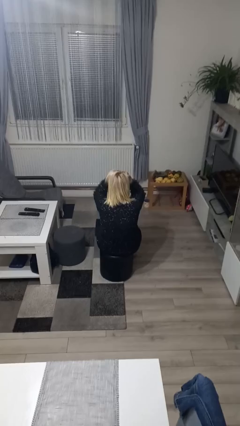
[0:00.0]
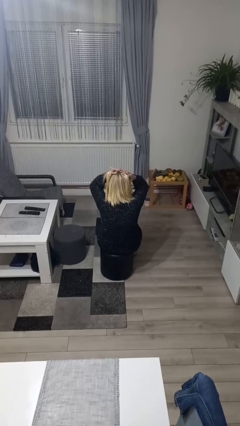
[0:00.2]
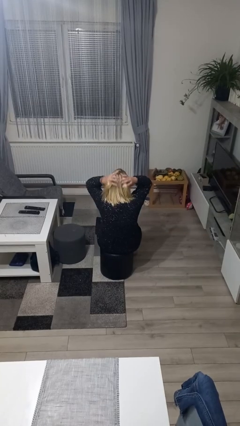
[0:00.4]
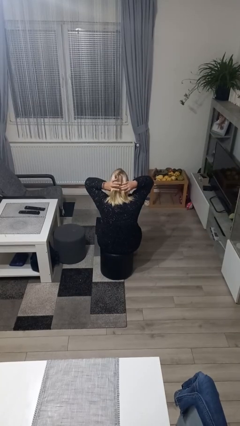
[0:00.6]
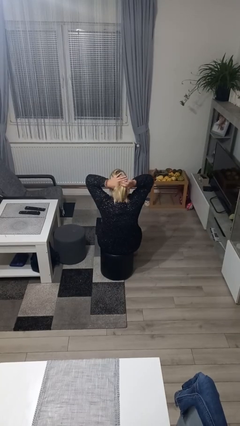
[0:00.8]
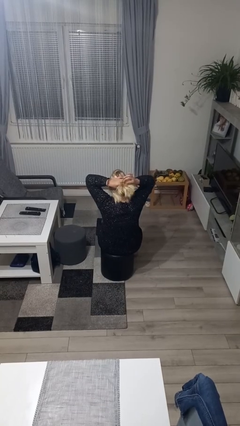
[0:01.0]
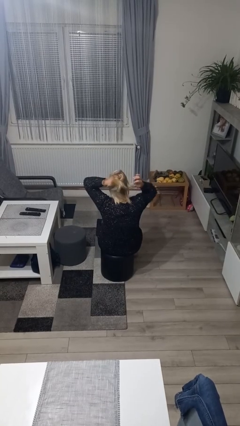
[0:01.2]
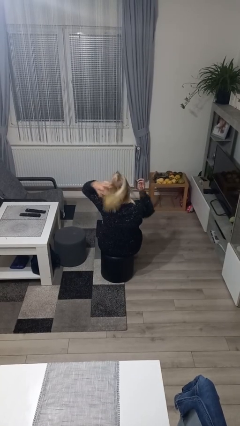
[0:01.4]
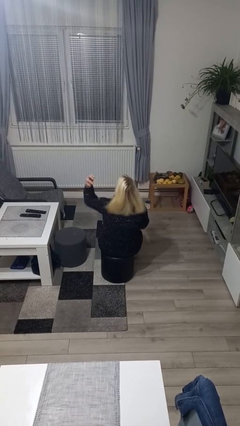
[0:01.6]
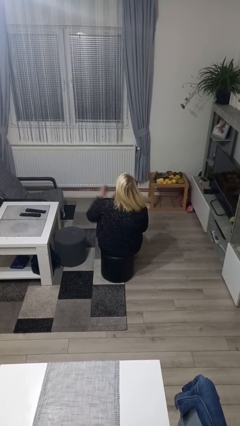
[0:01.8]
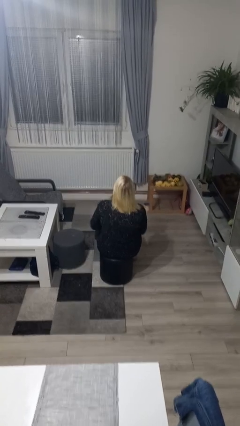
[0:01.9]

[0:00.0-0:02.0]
person strokes hair

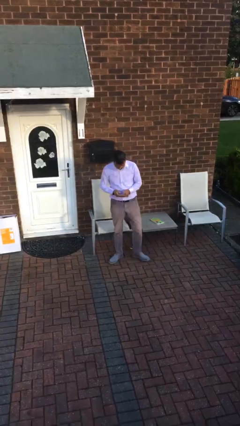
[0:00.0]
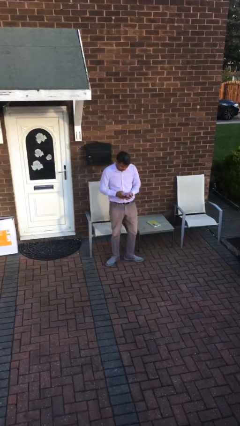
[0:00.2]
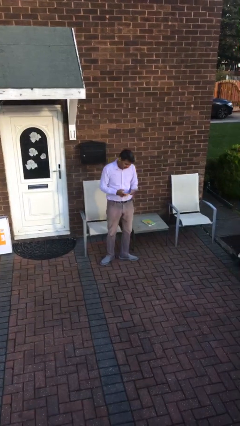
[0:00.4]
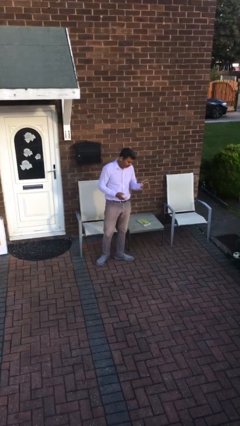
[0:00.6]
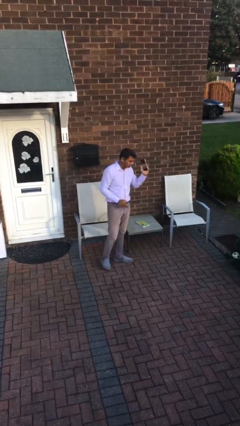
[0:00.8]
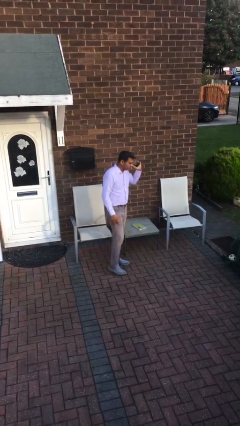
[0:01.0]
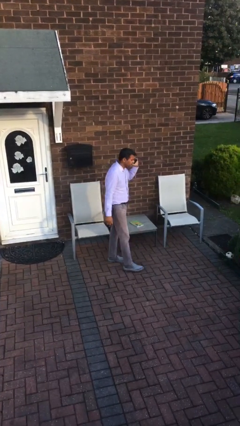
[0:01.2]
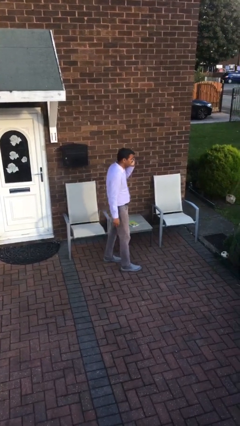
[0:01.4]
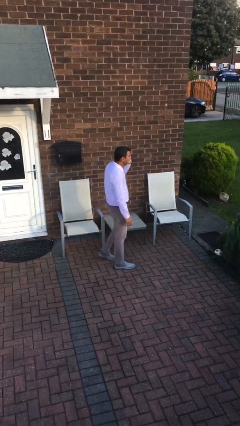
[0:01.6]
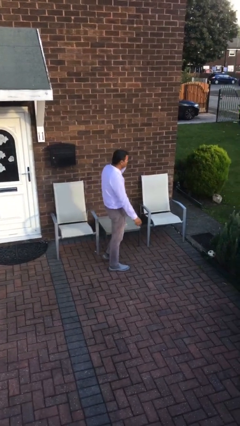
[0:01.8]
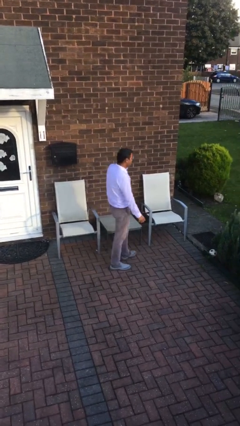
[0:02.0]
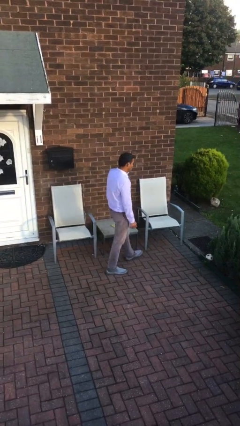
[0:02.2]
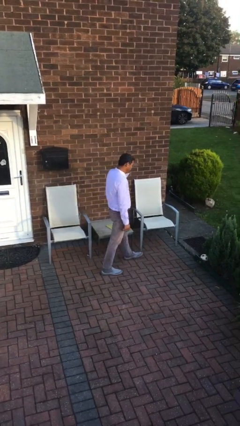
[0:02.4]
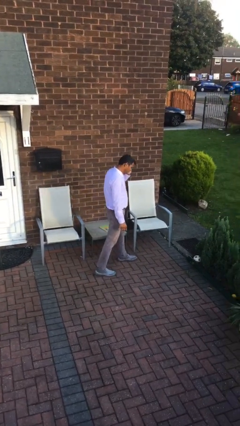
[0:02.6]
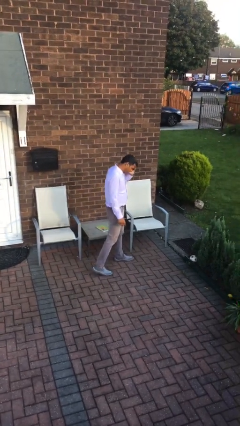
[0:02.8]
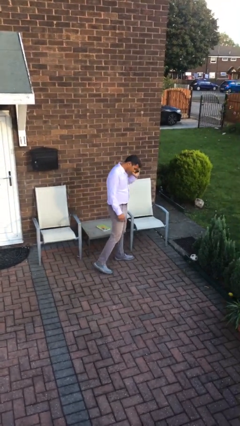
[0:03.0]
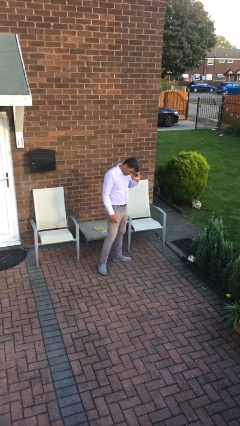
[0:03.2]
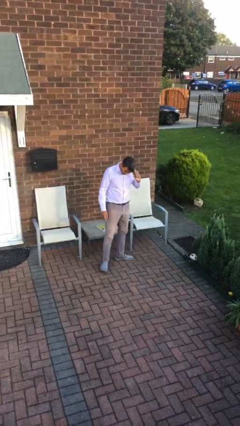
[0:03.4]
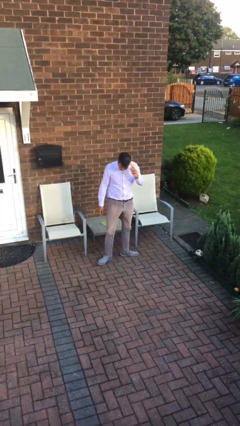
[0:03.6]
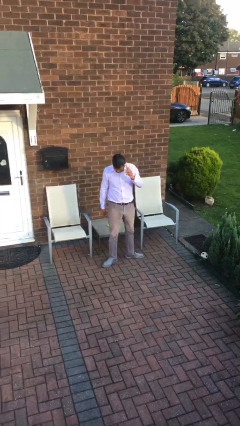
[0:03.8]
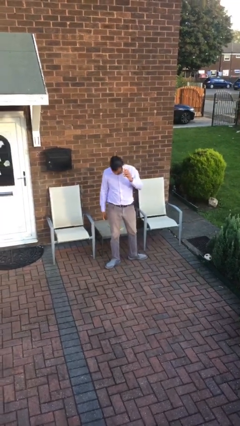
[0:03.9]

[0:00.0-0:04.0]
person talks on phone

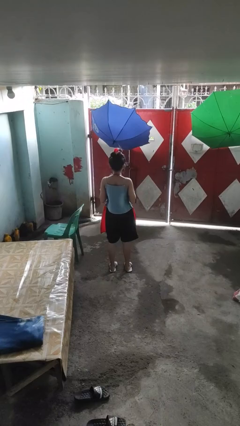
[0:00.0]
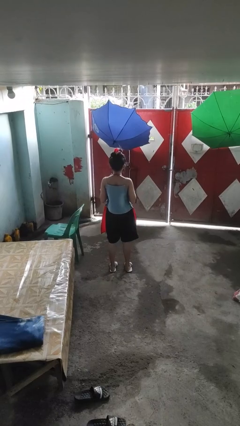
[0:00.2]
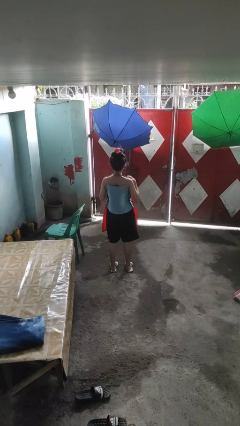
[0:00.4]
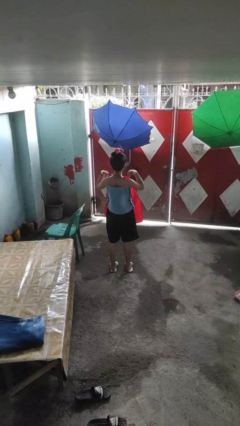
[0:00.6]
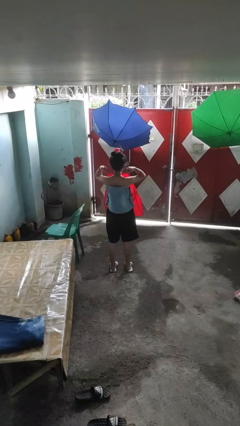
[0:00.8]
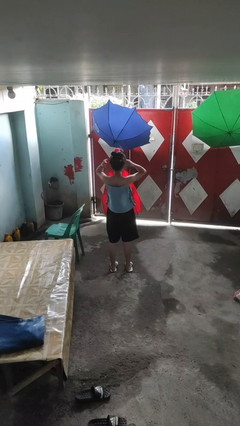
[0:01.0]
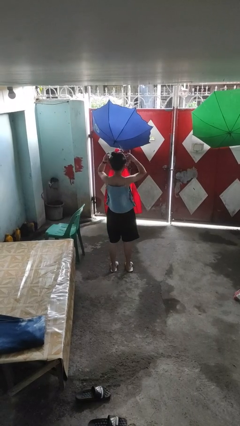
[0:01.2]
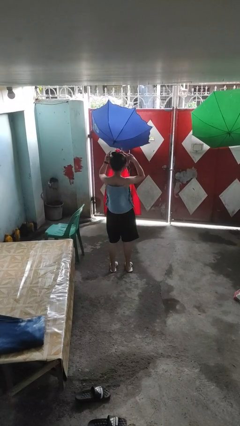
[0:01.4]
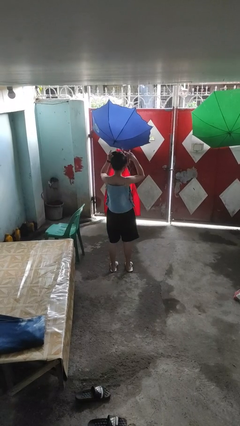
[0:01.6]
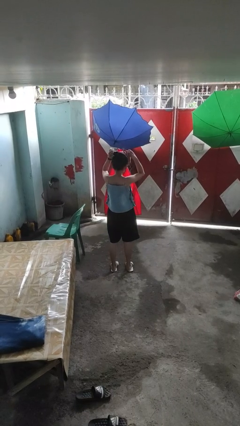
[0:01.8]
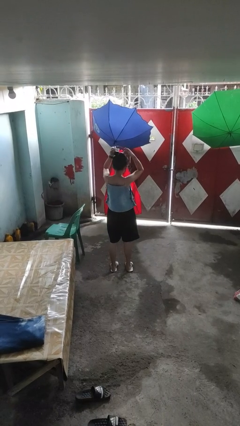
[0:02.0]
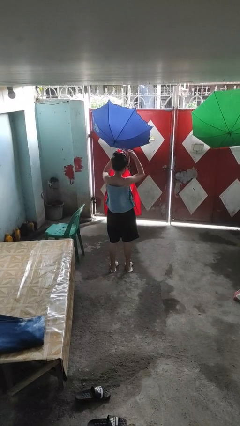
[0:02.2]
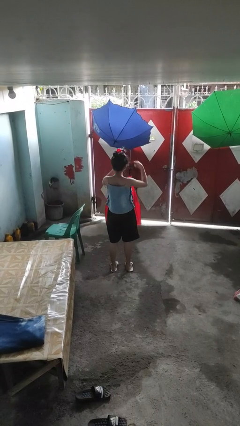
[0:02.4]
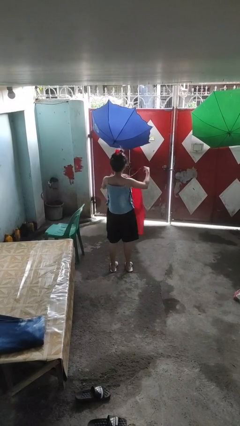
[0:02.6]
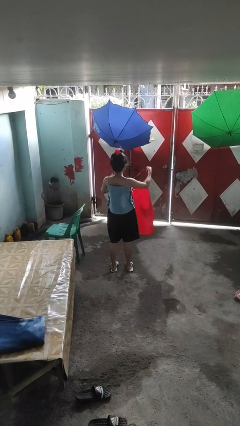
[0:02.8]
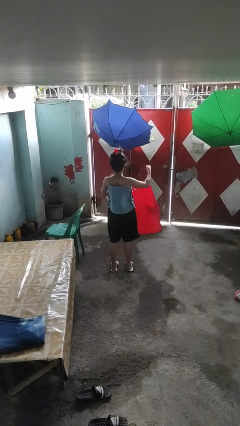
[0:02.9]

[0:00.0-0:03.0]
person takes off apron

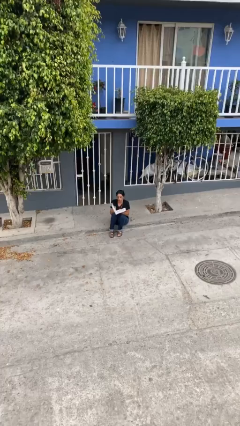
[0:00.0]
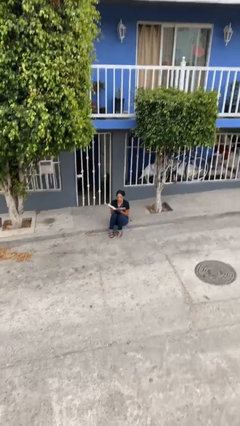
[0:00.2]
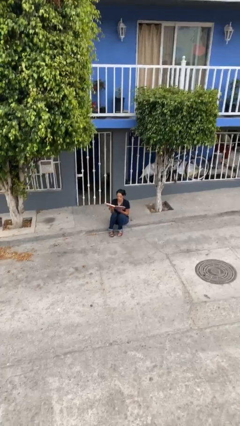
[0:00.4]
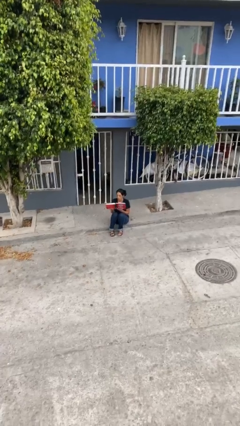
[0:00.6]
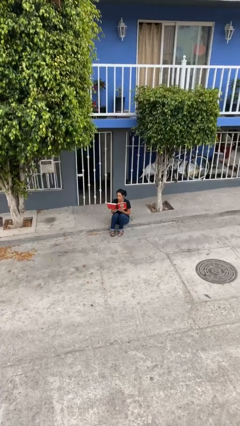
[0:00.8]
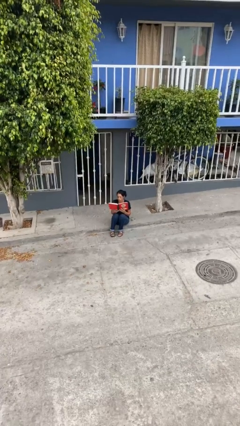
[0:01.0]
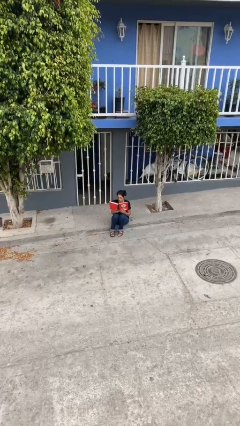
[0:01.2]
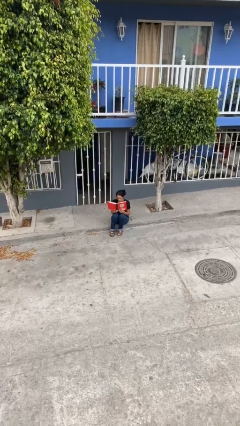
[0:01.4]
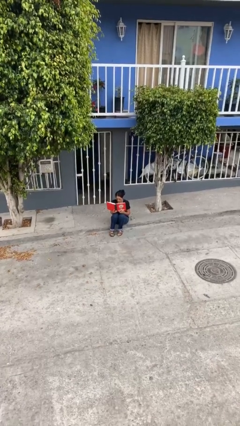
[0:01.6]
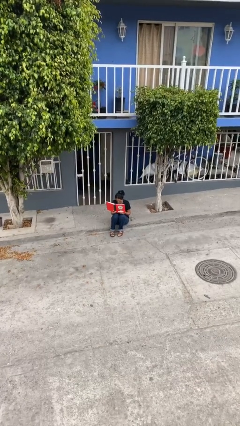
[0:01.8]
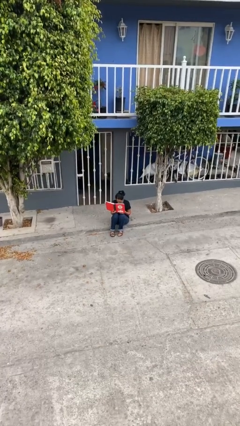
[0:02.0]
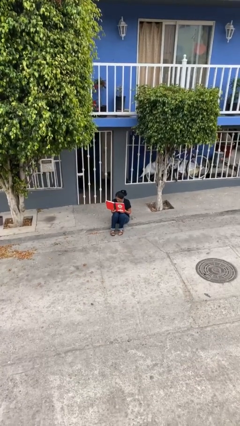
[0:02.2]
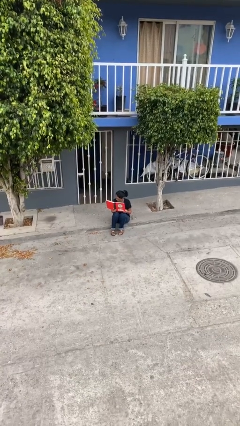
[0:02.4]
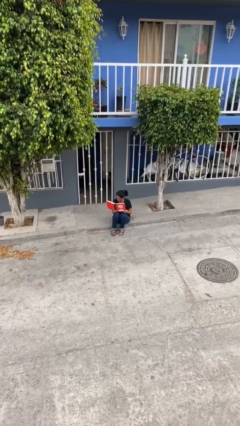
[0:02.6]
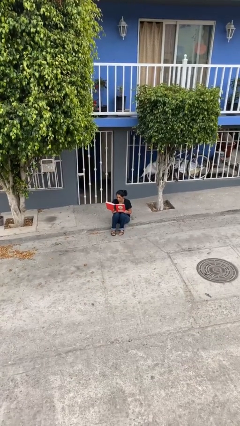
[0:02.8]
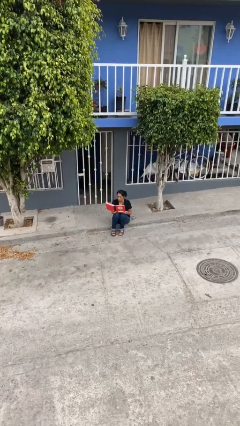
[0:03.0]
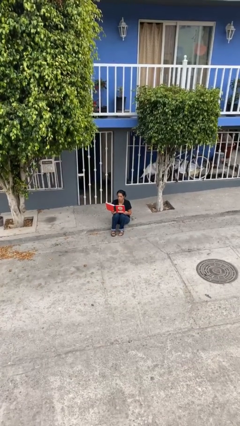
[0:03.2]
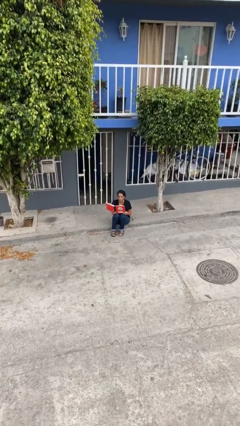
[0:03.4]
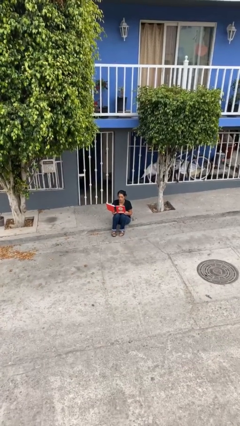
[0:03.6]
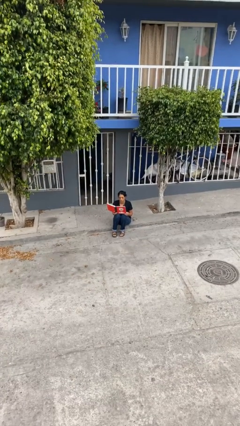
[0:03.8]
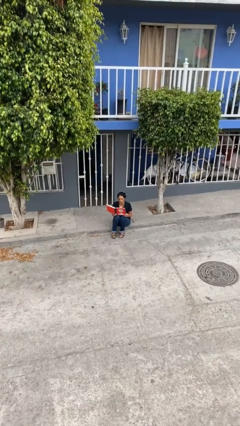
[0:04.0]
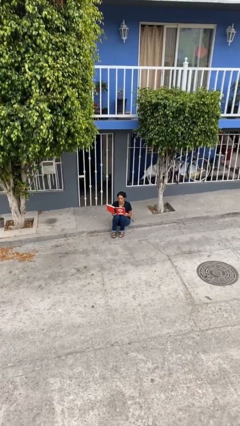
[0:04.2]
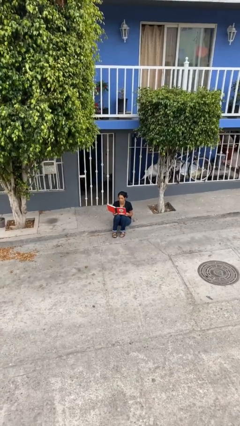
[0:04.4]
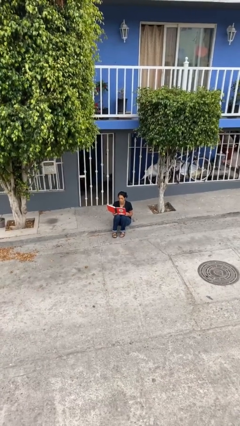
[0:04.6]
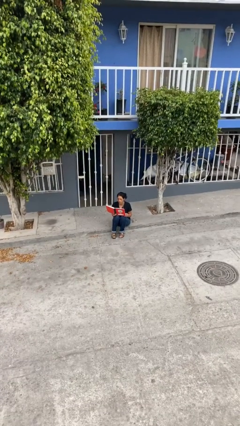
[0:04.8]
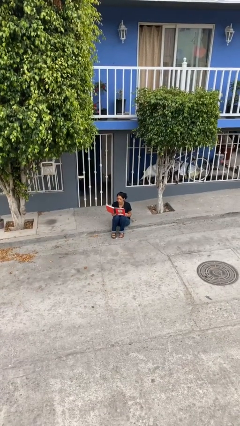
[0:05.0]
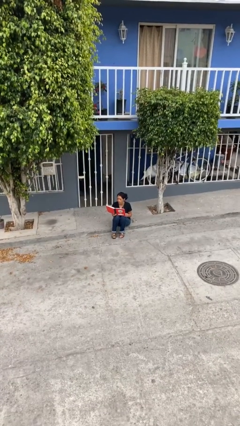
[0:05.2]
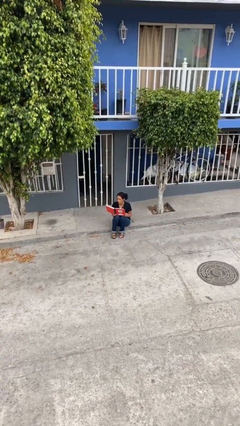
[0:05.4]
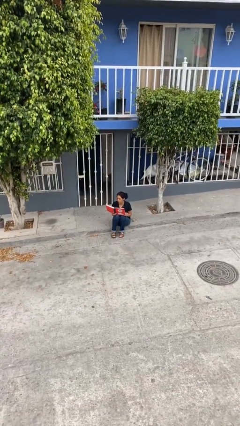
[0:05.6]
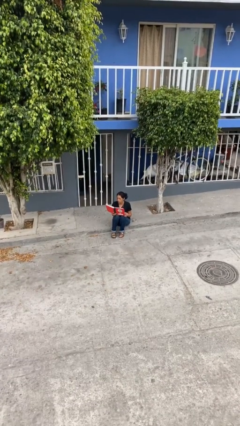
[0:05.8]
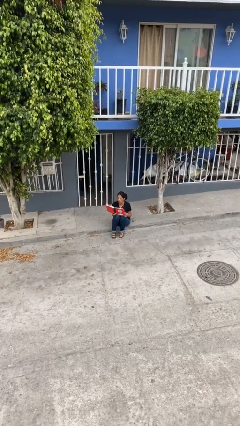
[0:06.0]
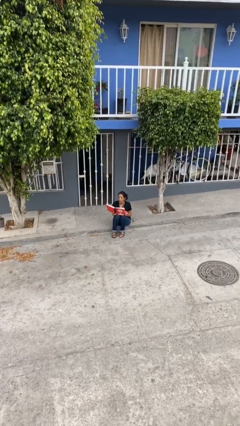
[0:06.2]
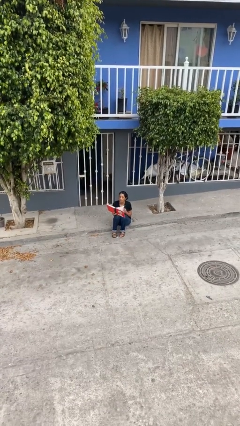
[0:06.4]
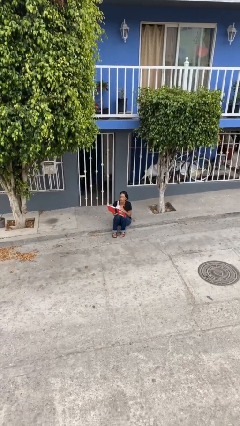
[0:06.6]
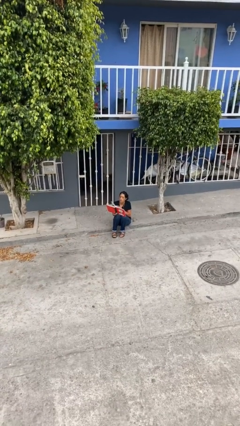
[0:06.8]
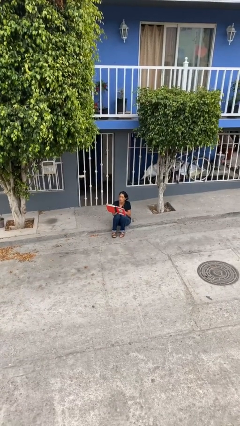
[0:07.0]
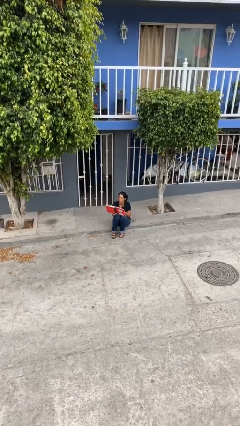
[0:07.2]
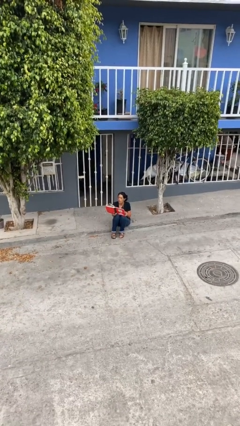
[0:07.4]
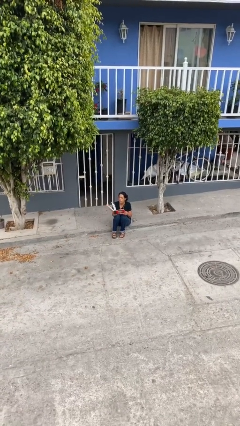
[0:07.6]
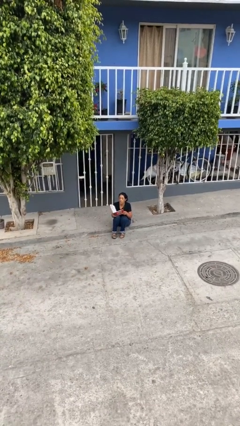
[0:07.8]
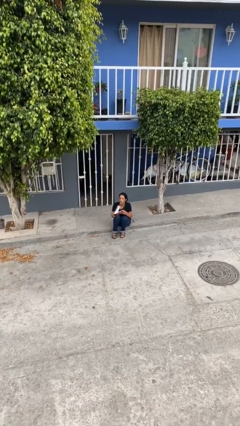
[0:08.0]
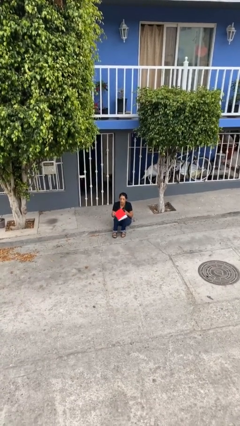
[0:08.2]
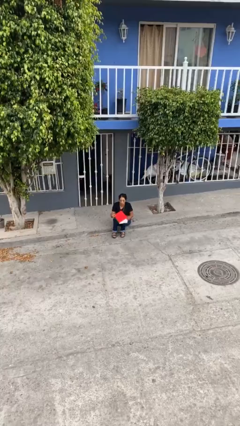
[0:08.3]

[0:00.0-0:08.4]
person reads document
